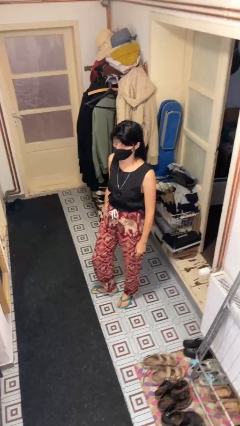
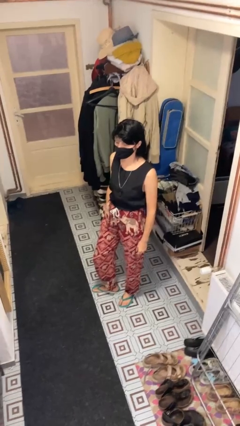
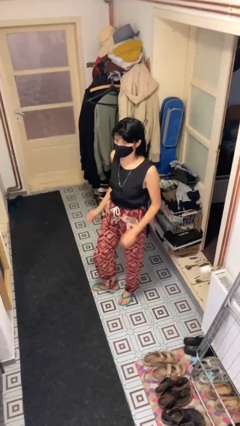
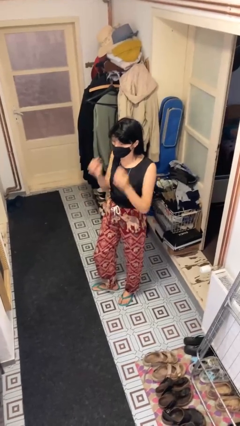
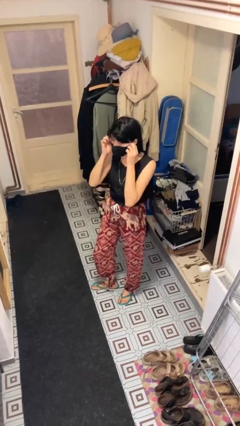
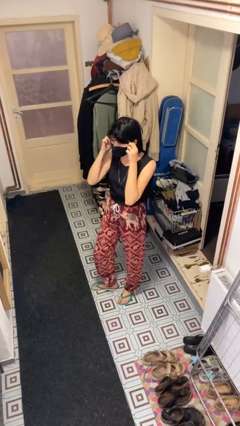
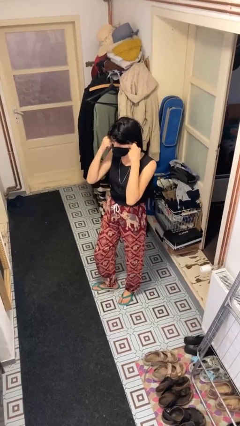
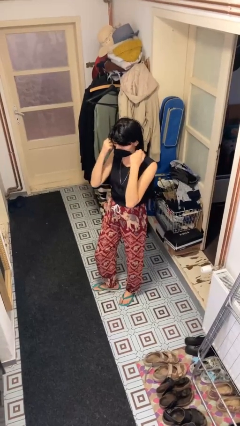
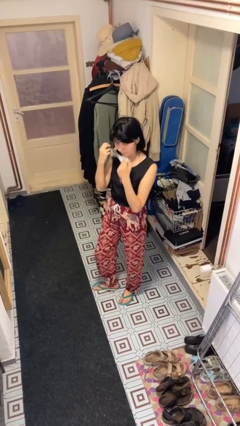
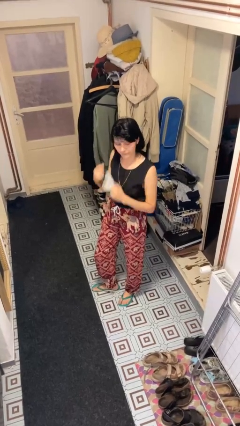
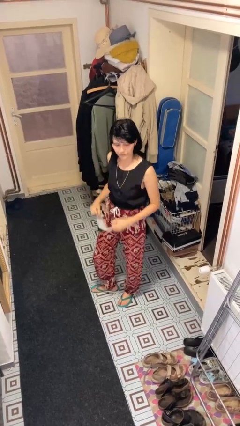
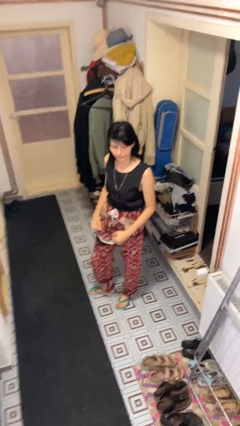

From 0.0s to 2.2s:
person takes off facemask

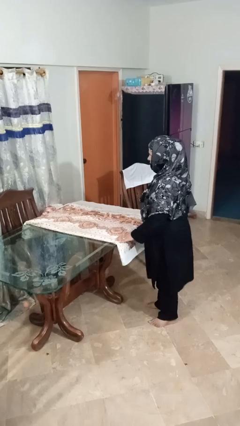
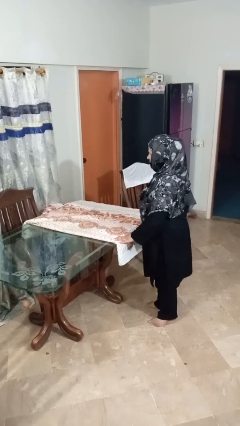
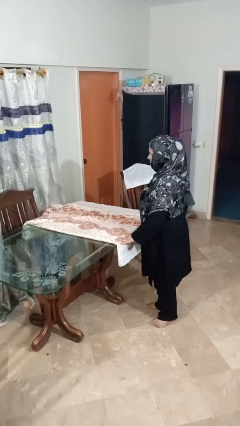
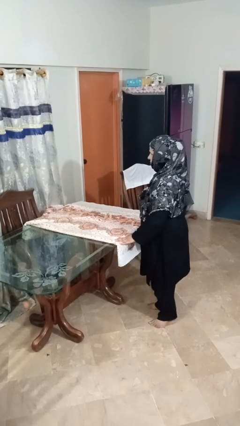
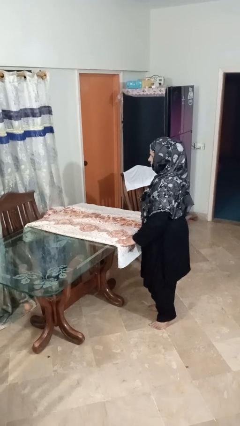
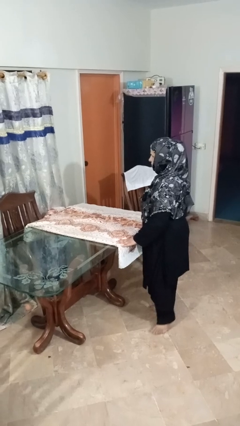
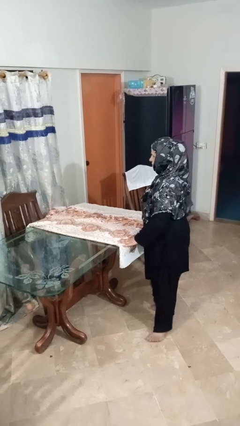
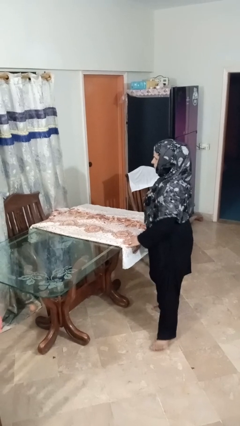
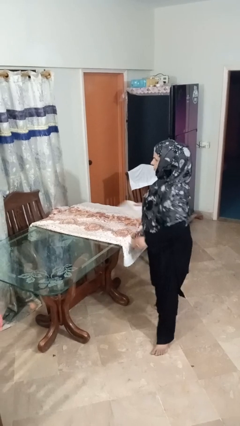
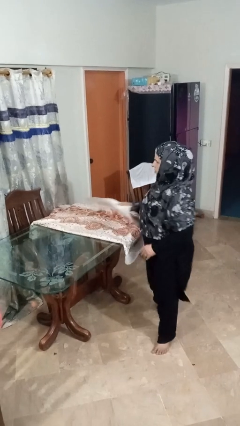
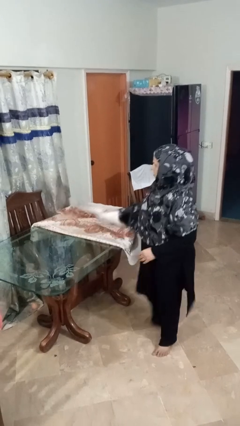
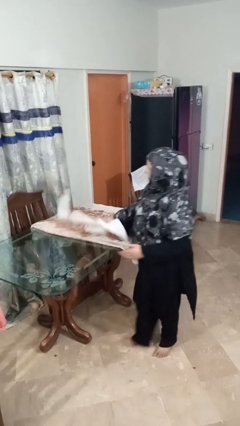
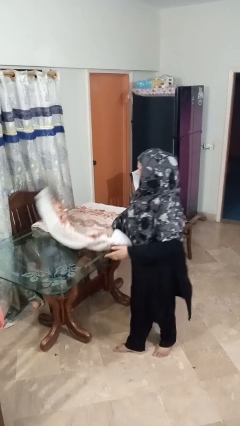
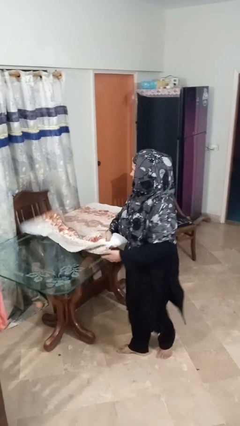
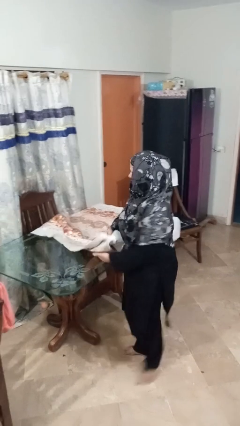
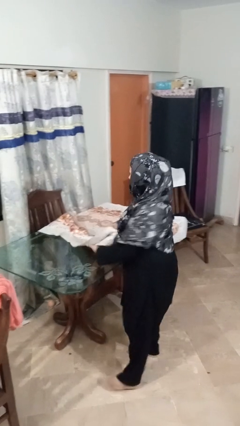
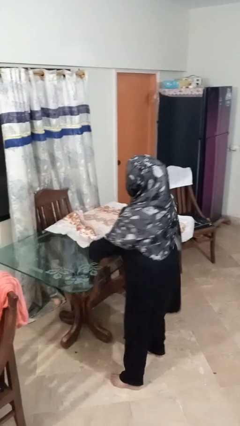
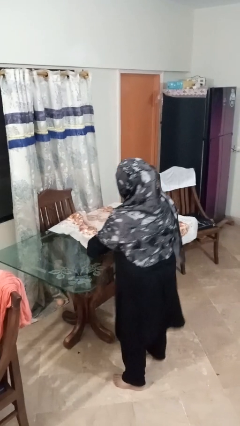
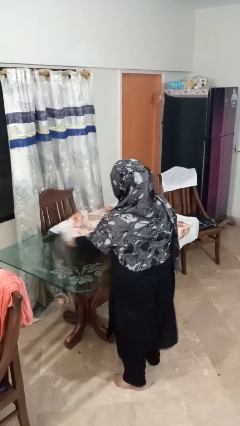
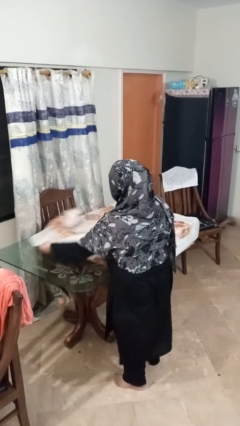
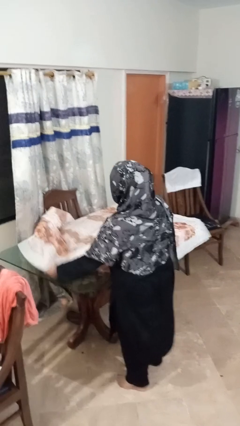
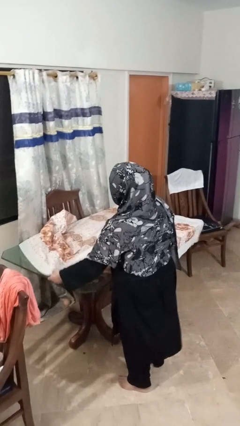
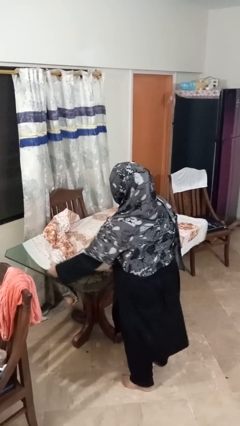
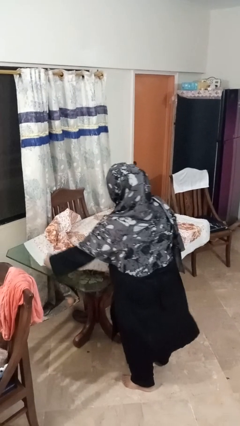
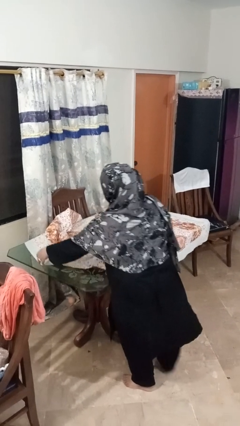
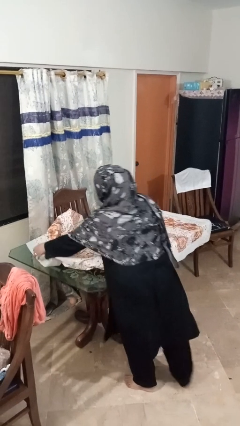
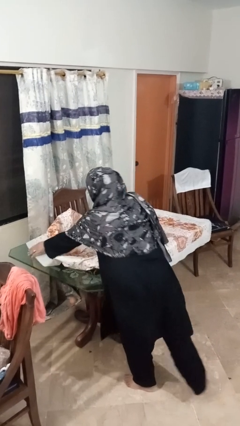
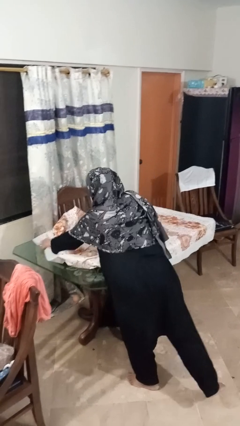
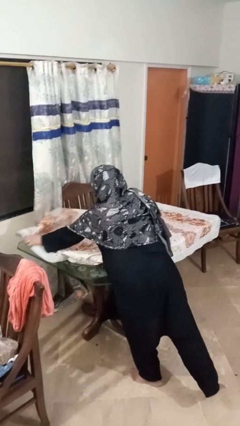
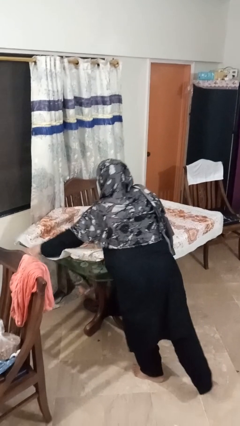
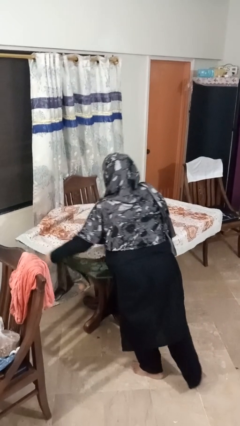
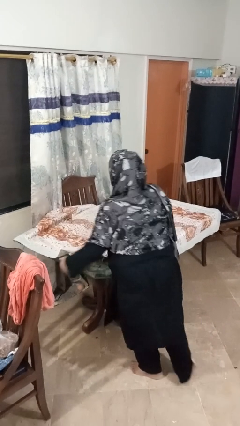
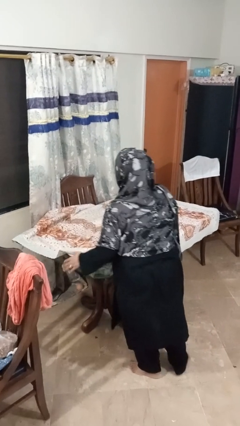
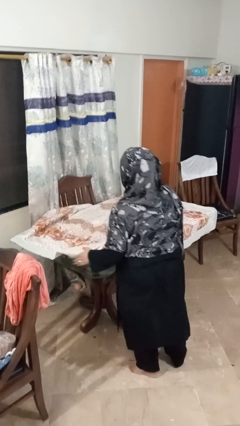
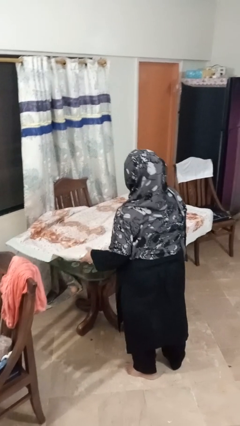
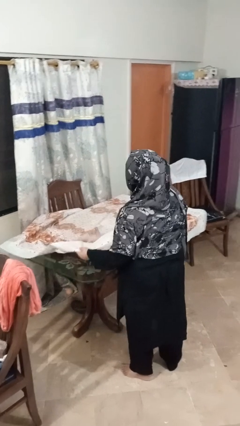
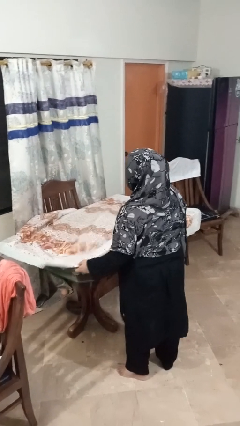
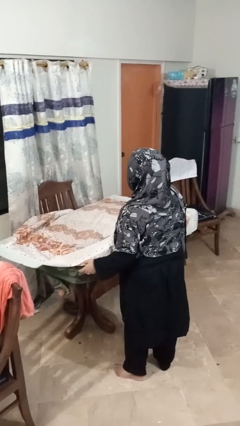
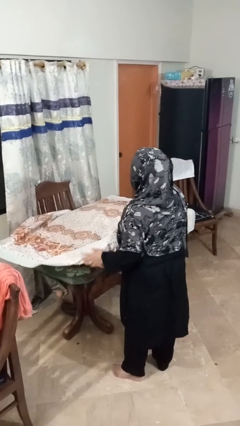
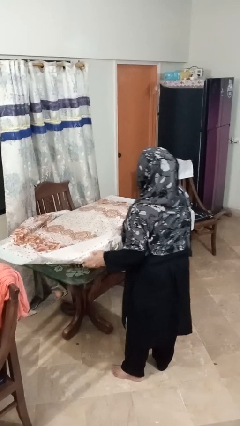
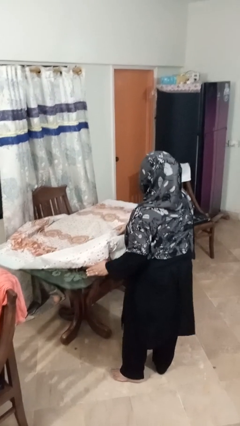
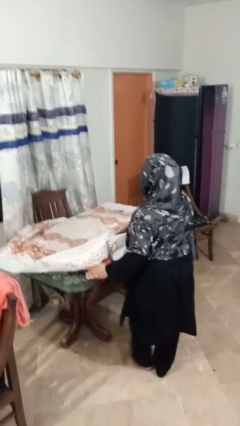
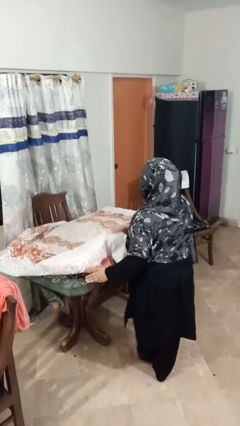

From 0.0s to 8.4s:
person spreads tablecloth

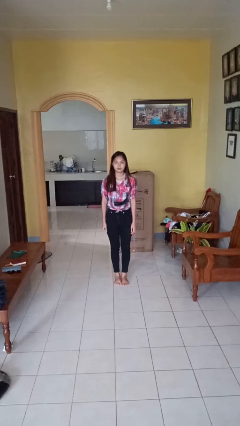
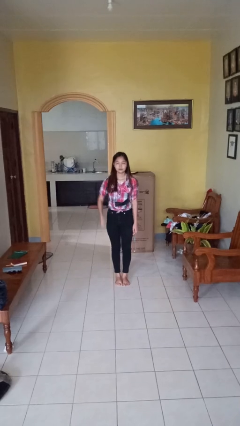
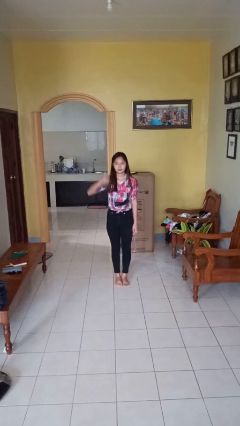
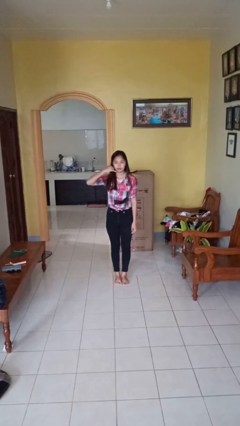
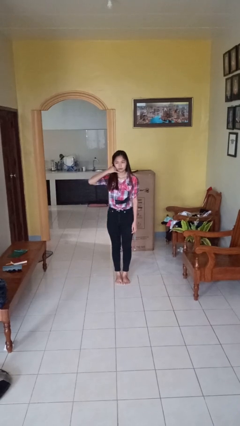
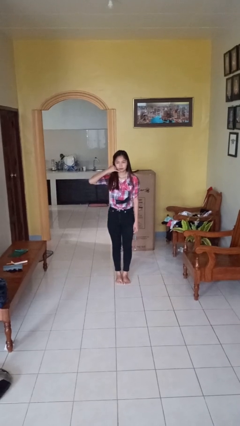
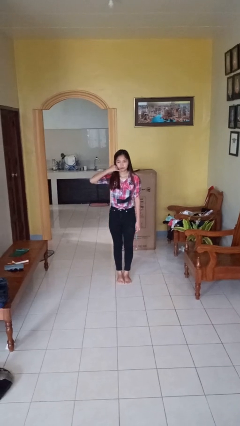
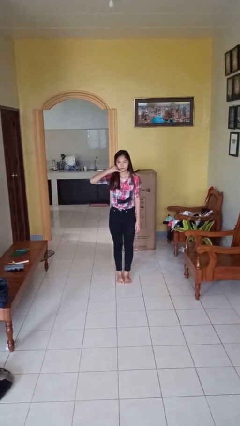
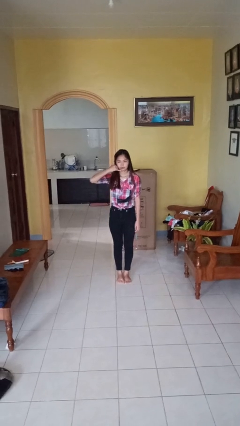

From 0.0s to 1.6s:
person gestures call me

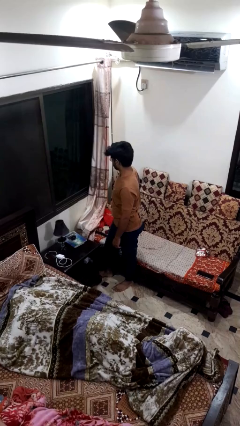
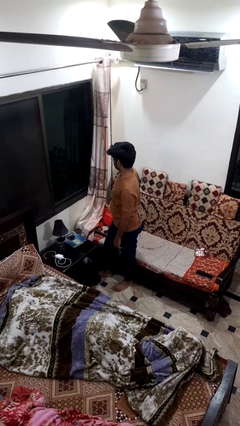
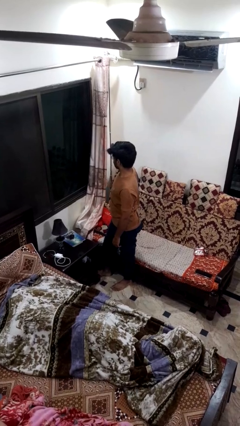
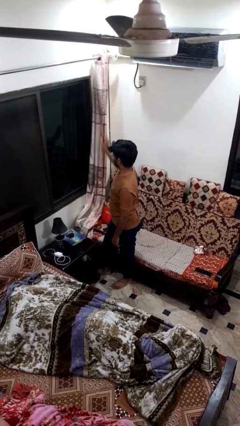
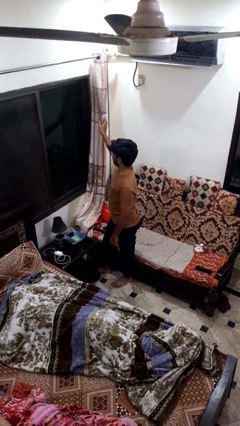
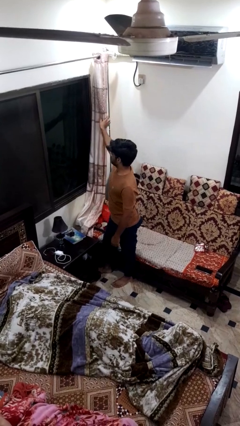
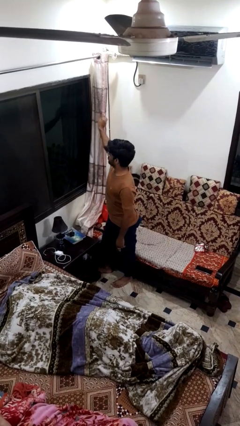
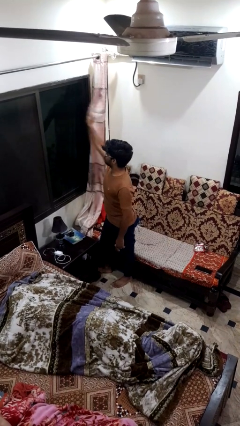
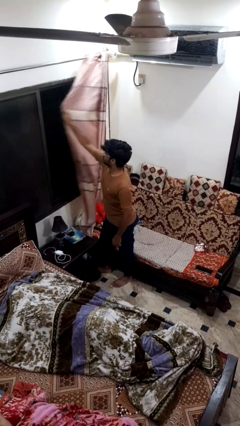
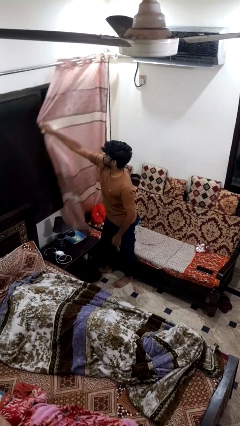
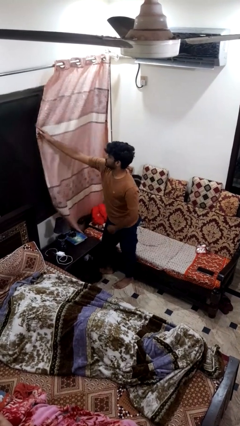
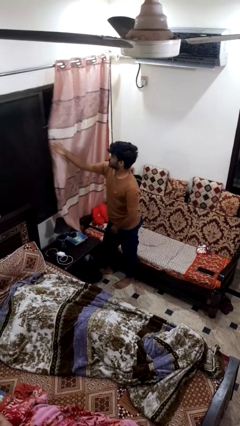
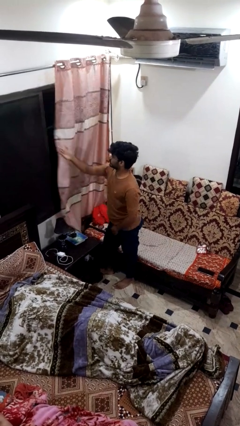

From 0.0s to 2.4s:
person closes curtains

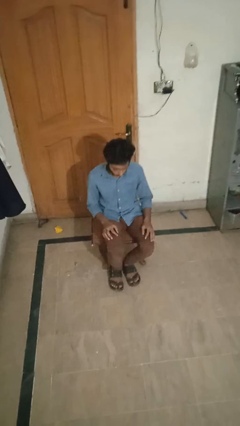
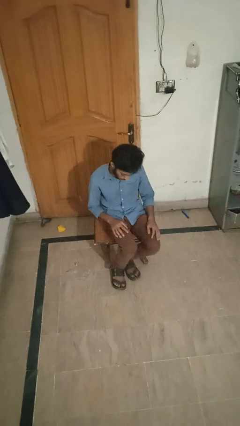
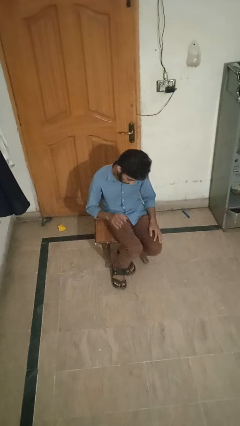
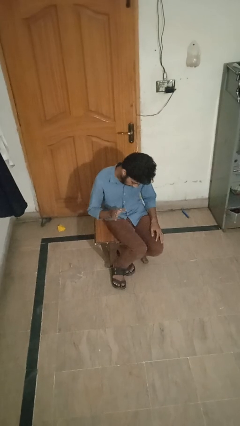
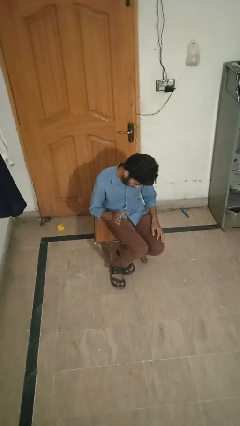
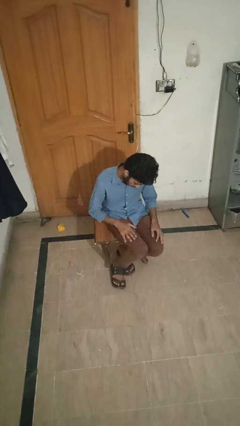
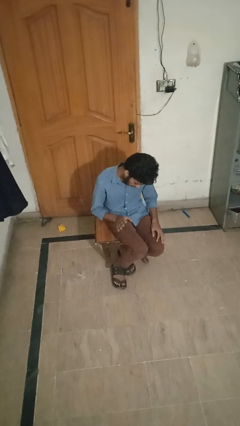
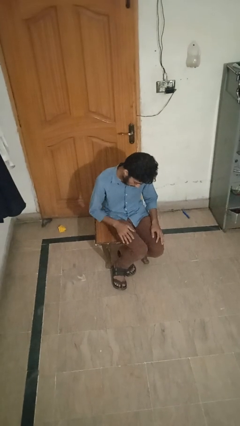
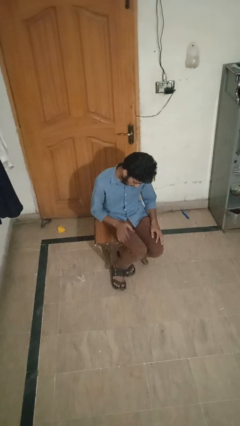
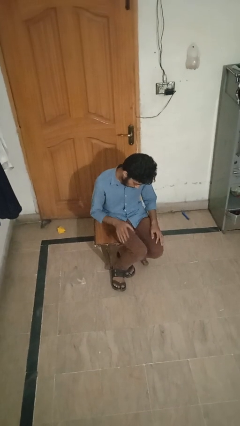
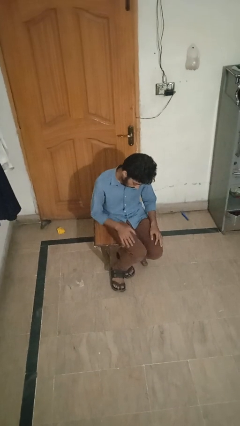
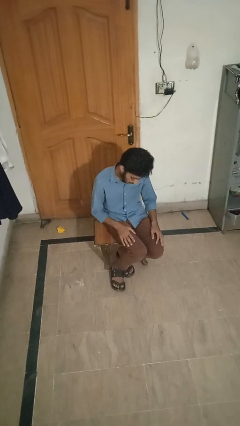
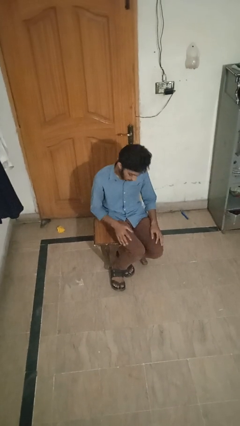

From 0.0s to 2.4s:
person slaps hands on thighs

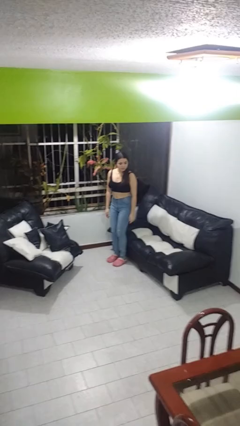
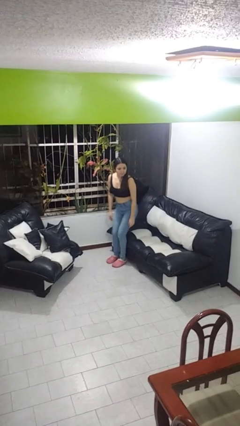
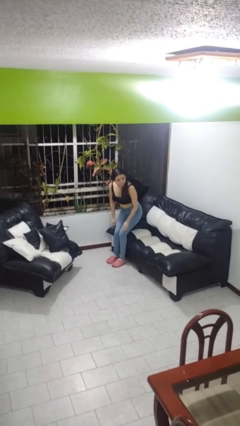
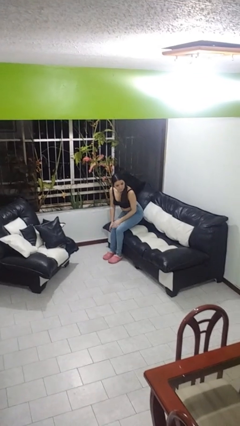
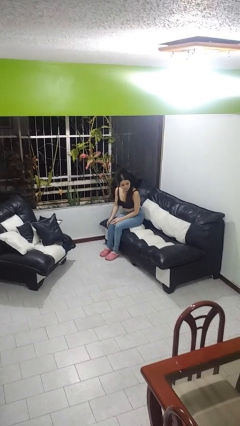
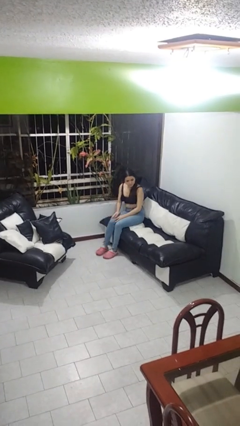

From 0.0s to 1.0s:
person lies down on couch
